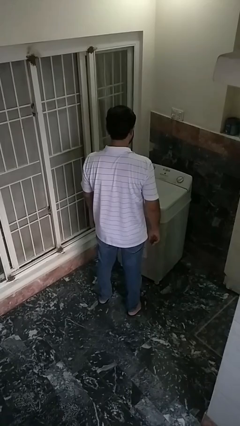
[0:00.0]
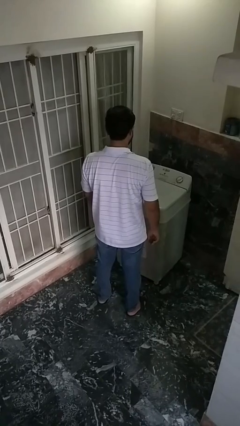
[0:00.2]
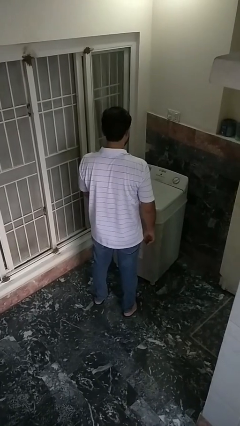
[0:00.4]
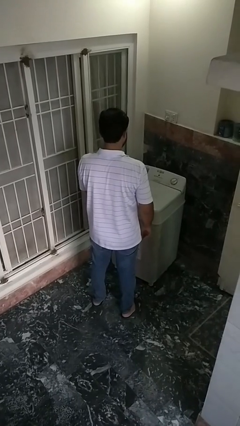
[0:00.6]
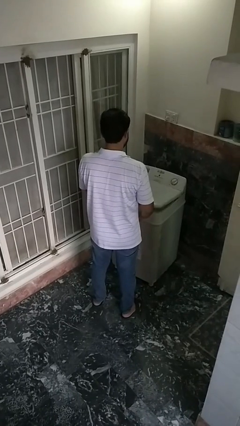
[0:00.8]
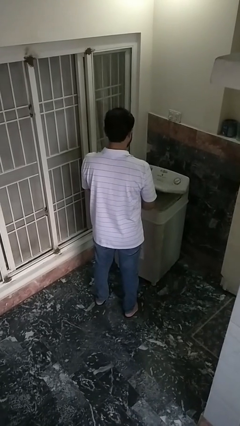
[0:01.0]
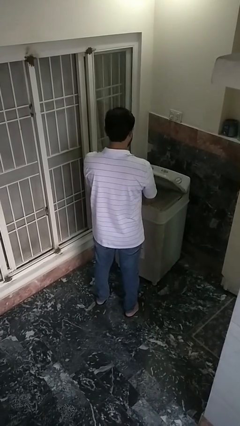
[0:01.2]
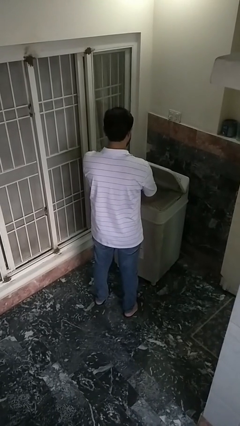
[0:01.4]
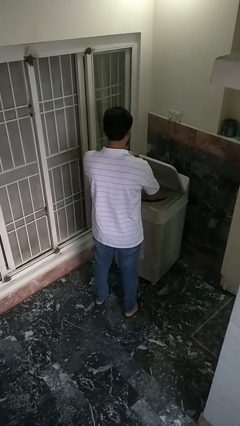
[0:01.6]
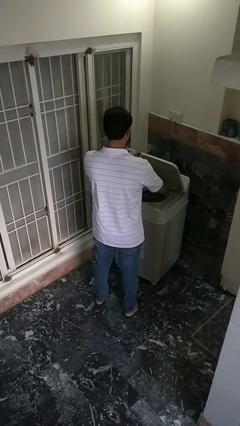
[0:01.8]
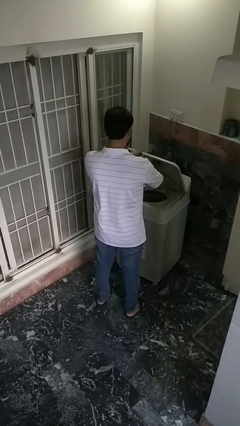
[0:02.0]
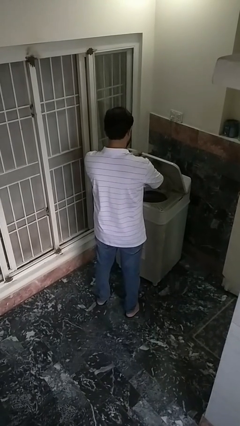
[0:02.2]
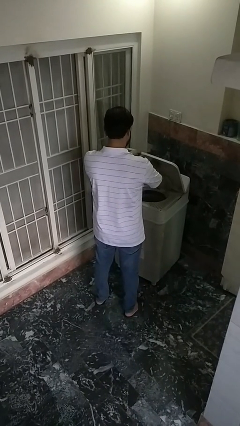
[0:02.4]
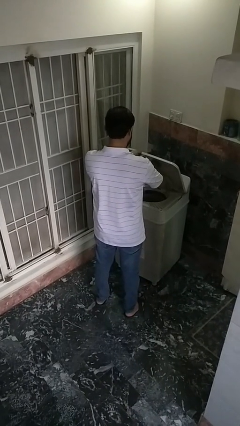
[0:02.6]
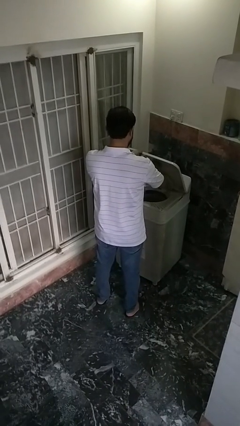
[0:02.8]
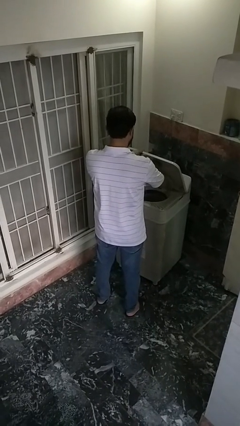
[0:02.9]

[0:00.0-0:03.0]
person opens clothes washer

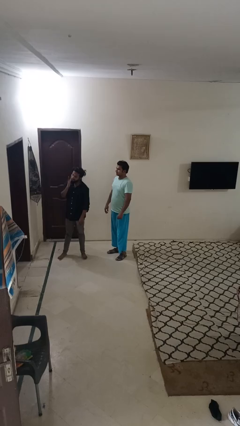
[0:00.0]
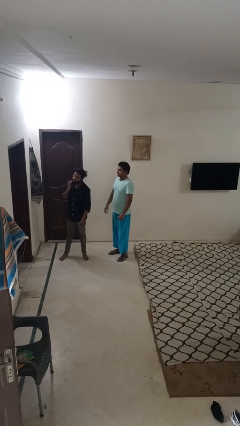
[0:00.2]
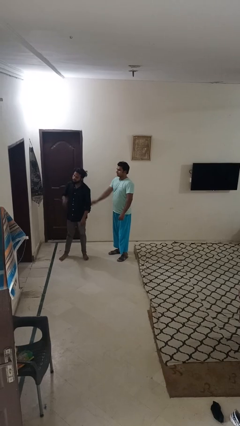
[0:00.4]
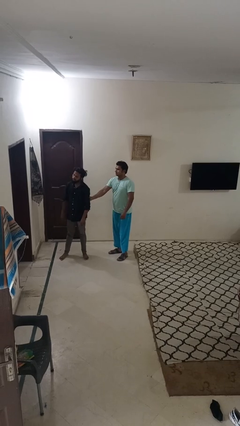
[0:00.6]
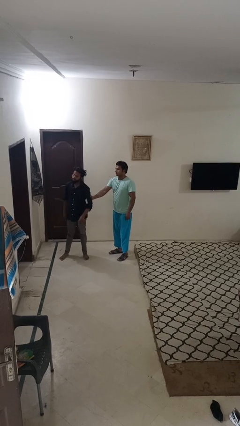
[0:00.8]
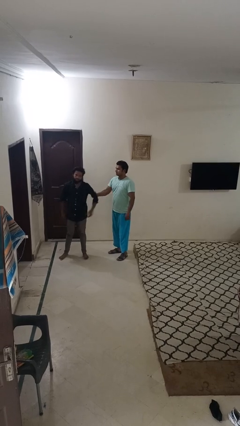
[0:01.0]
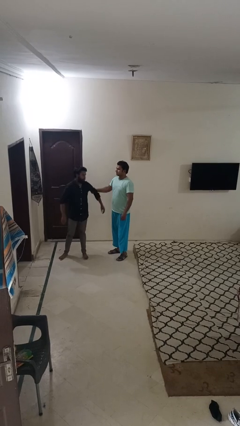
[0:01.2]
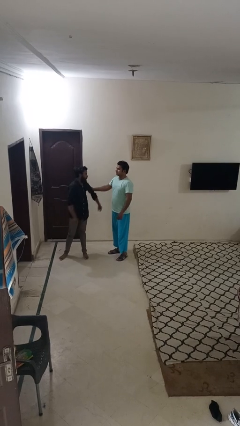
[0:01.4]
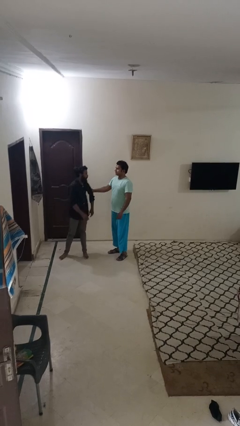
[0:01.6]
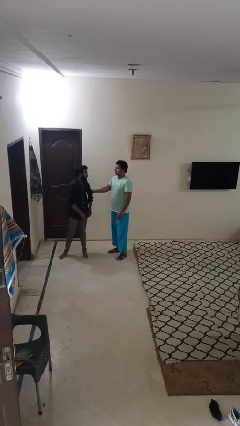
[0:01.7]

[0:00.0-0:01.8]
person grabs person by bicep

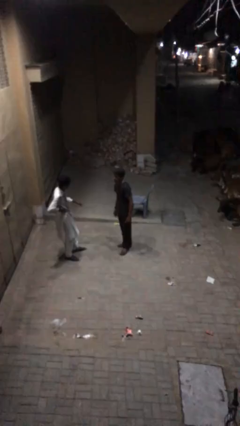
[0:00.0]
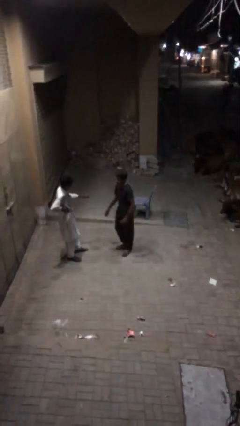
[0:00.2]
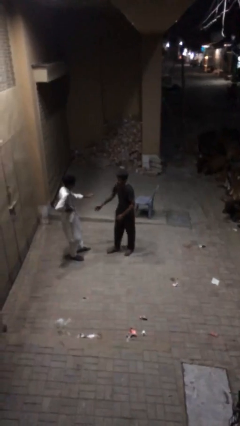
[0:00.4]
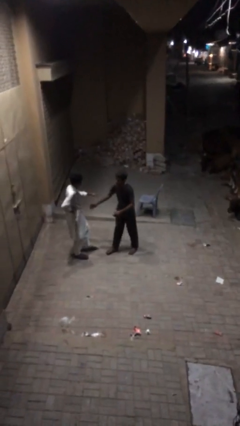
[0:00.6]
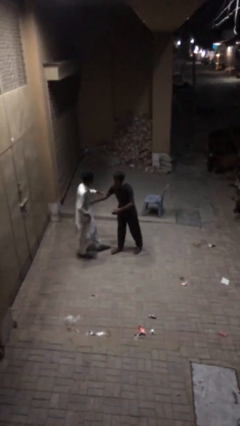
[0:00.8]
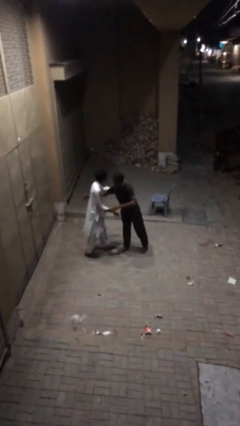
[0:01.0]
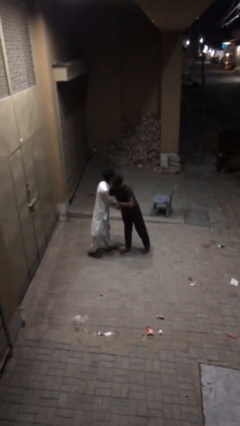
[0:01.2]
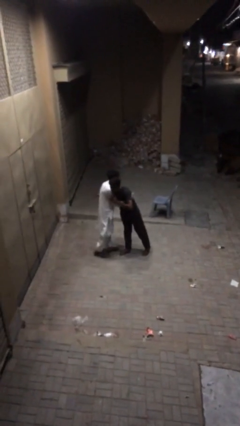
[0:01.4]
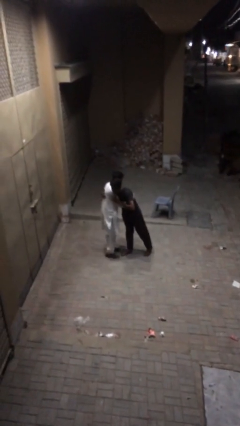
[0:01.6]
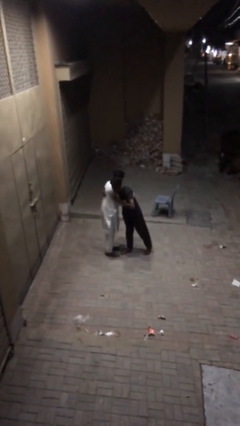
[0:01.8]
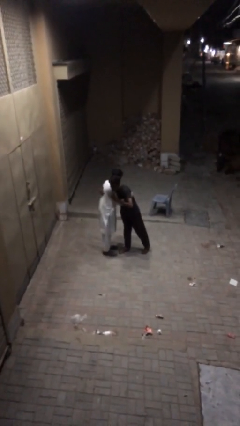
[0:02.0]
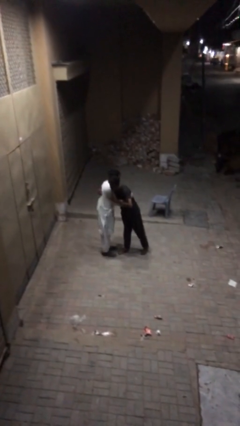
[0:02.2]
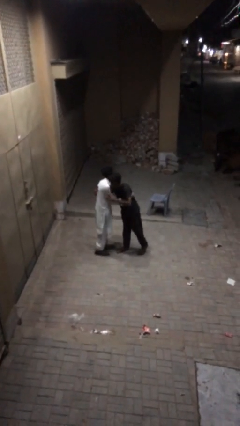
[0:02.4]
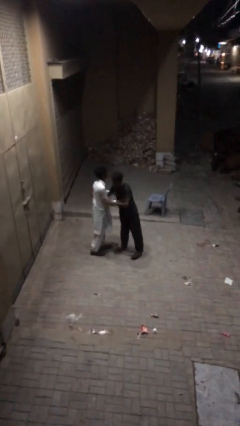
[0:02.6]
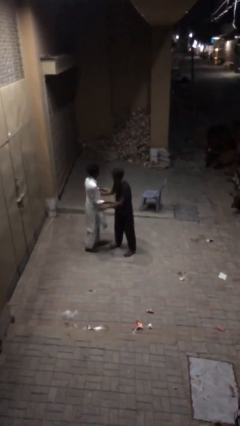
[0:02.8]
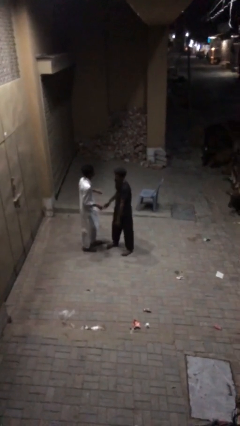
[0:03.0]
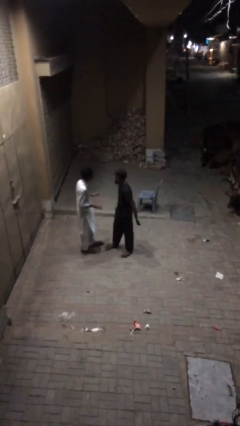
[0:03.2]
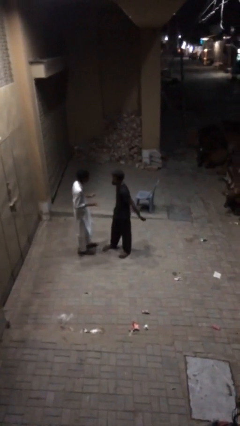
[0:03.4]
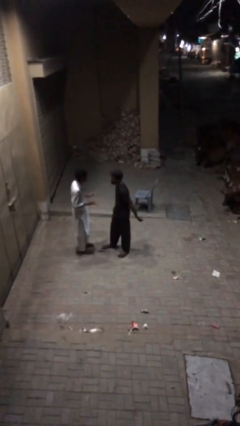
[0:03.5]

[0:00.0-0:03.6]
person embraces person

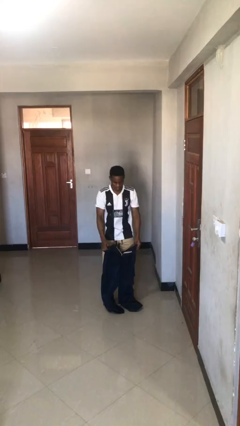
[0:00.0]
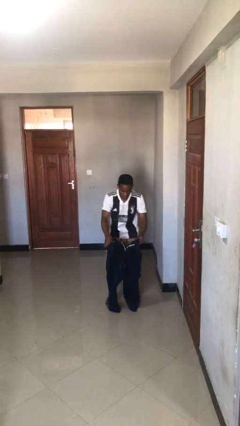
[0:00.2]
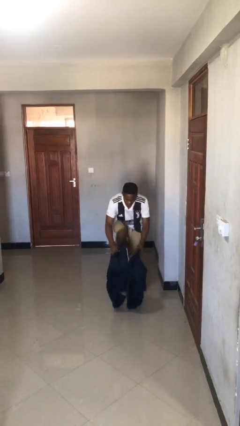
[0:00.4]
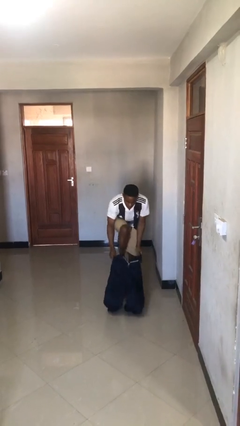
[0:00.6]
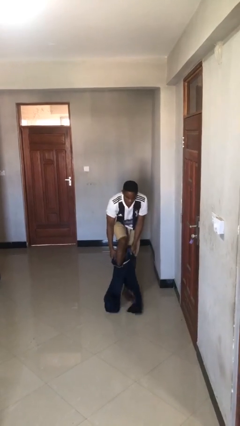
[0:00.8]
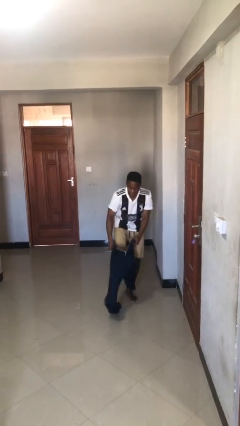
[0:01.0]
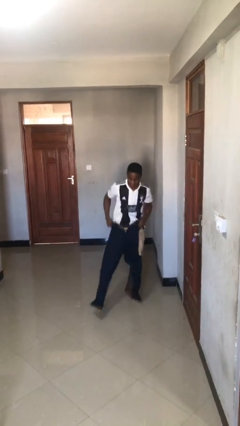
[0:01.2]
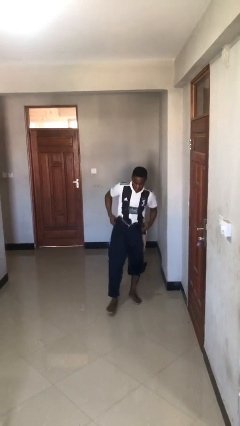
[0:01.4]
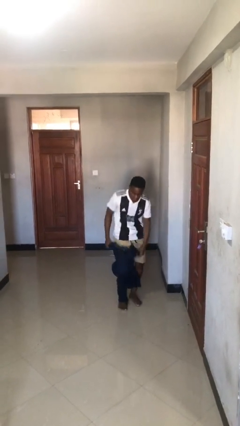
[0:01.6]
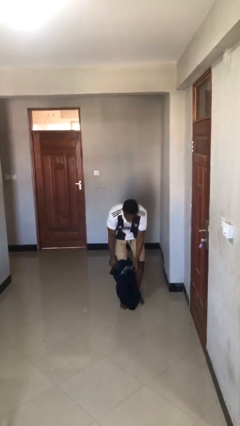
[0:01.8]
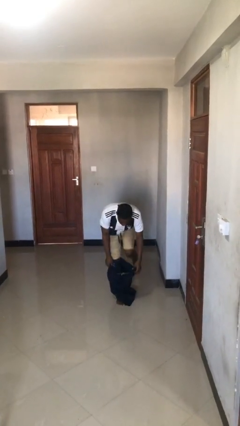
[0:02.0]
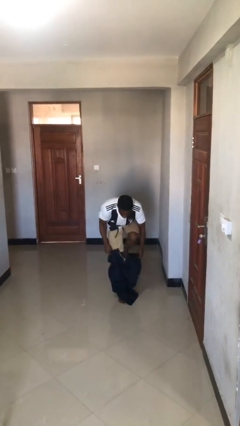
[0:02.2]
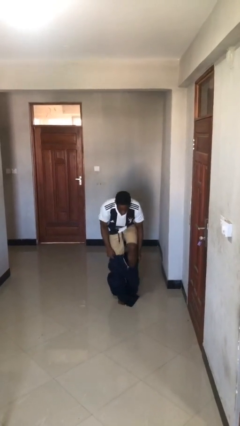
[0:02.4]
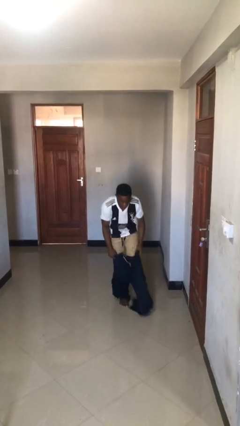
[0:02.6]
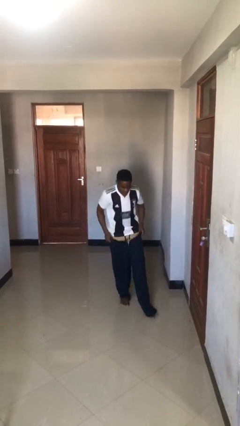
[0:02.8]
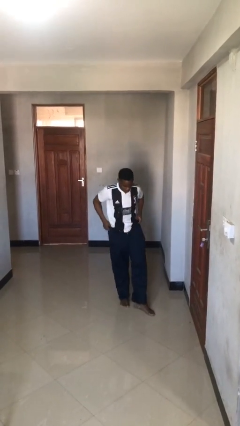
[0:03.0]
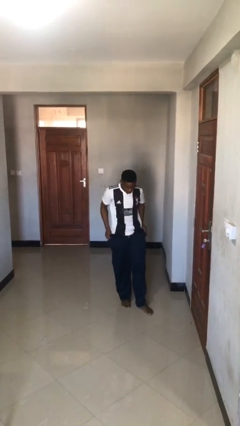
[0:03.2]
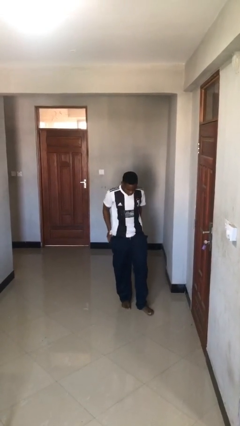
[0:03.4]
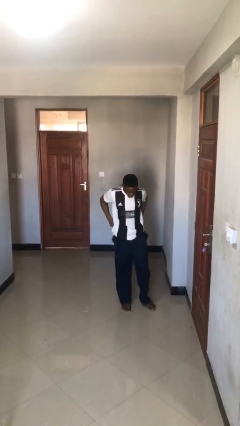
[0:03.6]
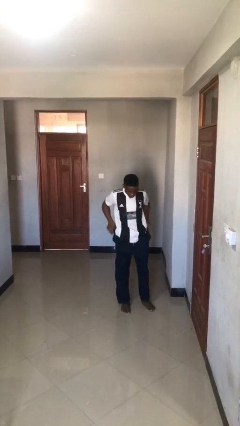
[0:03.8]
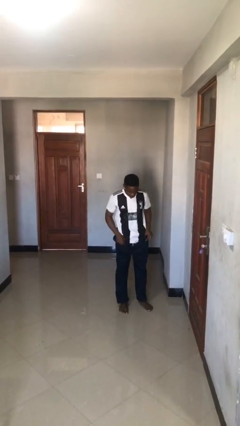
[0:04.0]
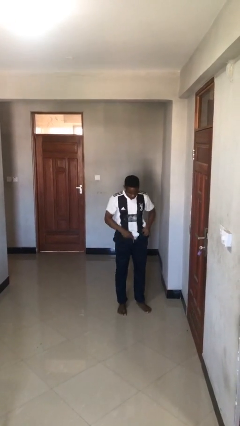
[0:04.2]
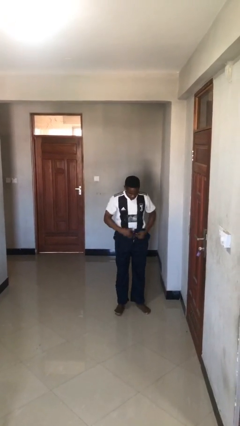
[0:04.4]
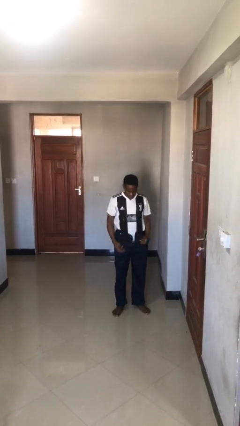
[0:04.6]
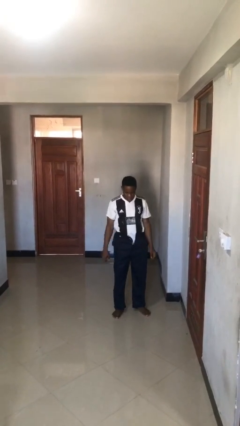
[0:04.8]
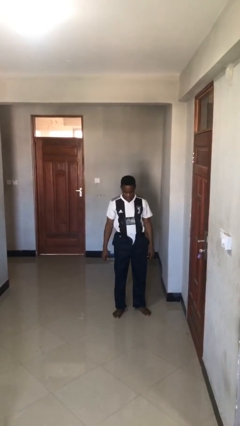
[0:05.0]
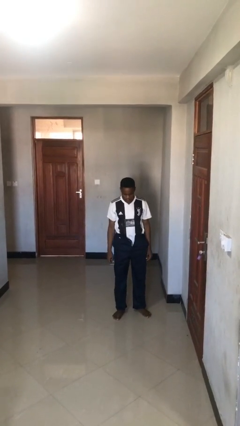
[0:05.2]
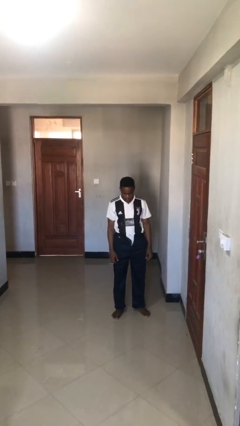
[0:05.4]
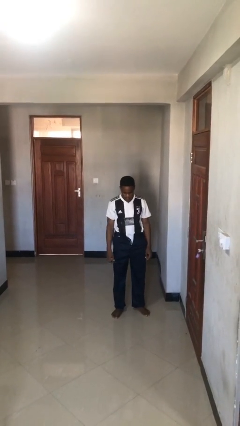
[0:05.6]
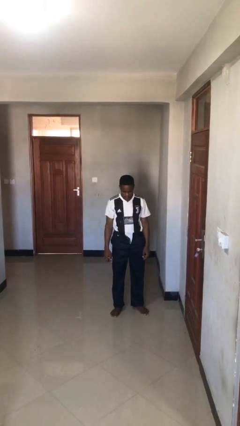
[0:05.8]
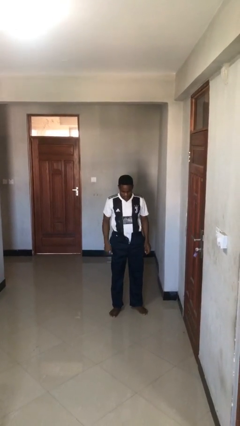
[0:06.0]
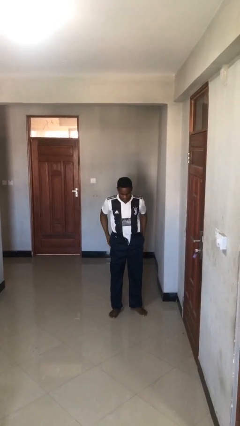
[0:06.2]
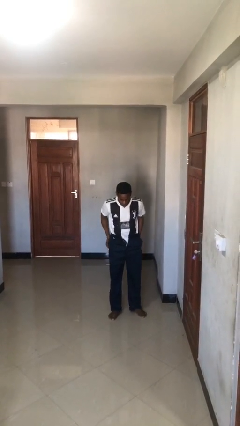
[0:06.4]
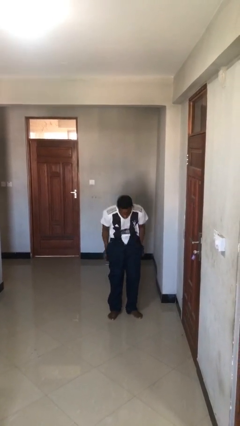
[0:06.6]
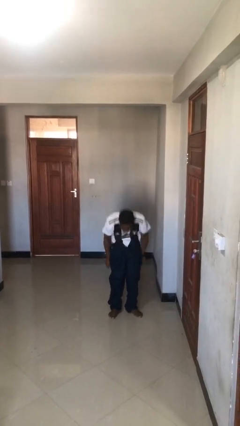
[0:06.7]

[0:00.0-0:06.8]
person puts on pants

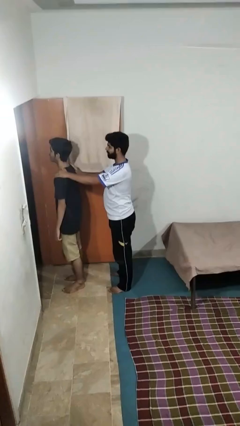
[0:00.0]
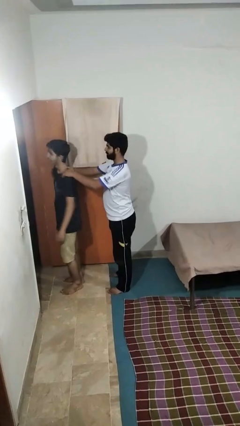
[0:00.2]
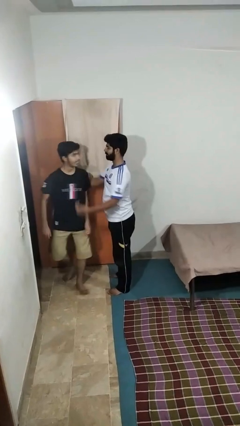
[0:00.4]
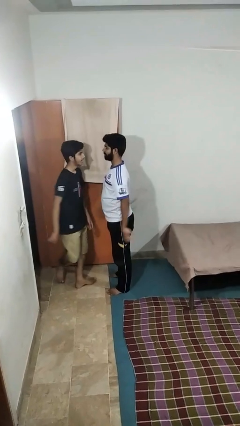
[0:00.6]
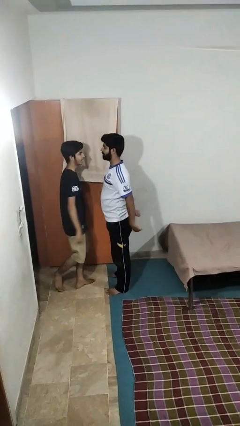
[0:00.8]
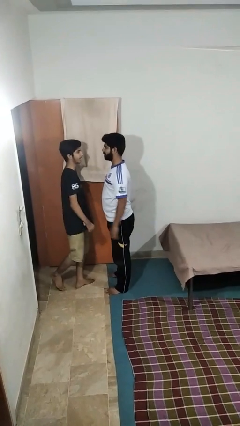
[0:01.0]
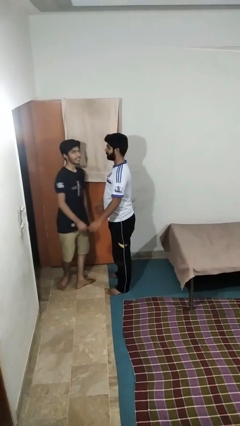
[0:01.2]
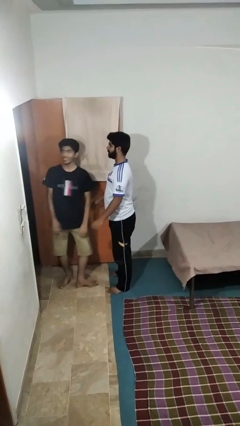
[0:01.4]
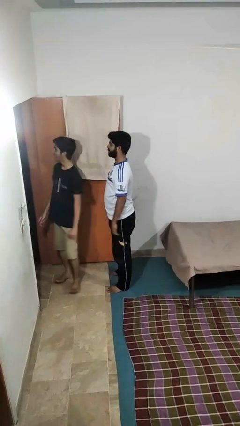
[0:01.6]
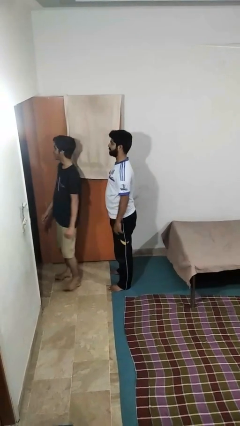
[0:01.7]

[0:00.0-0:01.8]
person spins person around

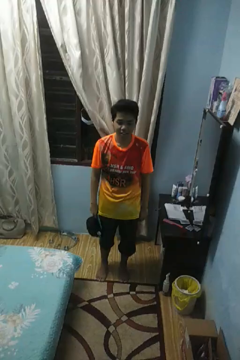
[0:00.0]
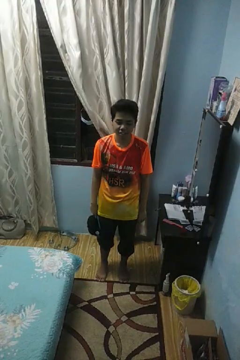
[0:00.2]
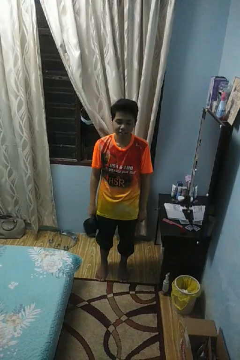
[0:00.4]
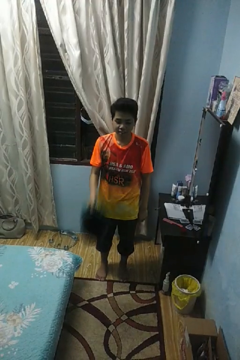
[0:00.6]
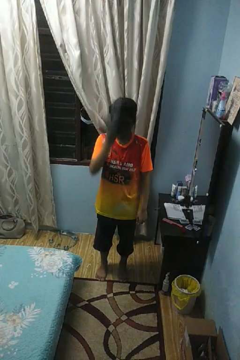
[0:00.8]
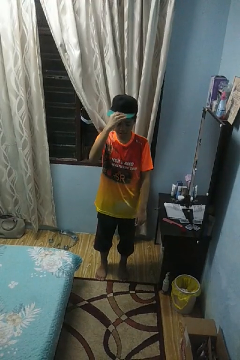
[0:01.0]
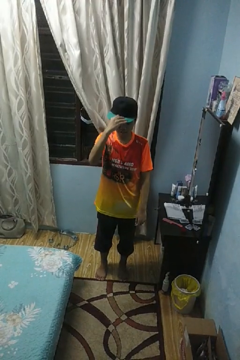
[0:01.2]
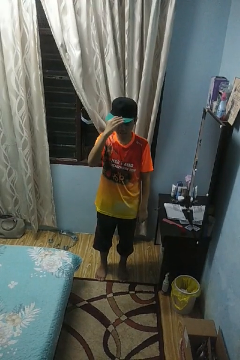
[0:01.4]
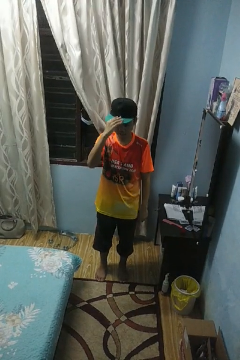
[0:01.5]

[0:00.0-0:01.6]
person puts on hat
